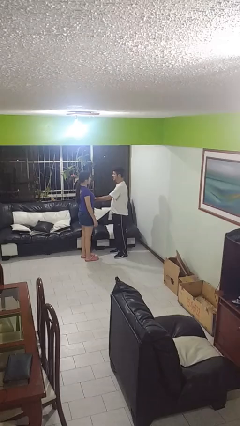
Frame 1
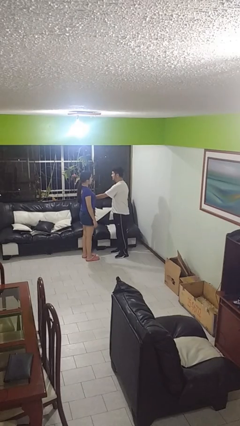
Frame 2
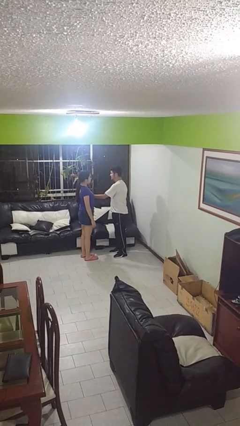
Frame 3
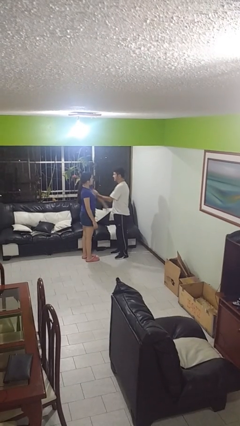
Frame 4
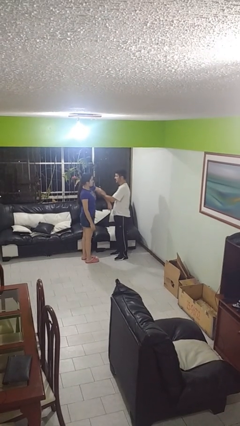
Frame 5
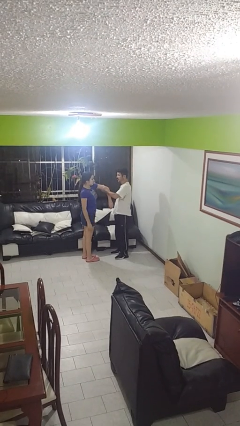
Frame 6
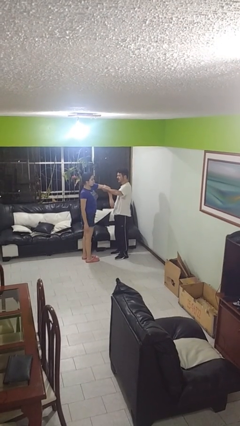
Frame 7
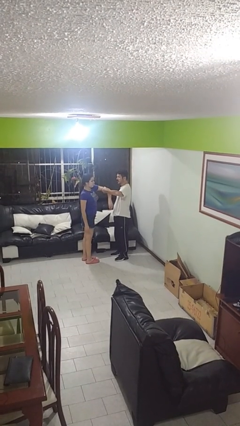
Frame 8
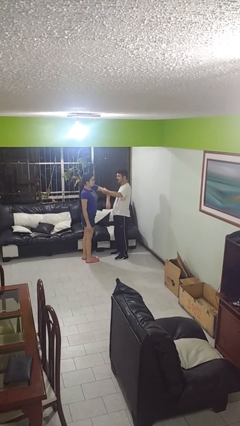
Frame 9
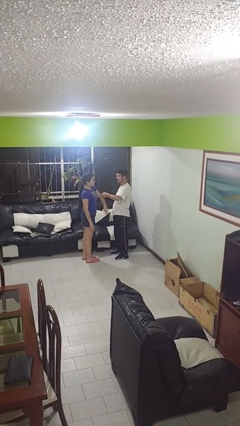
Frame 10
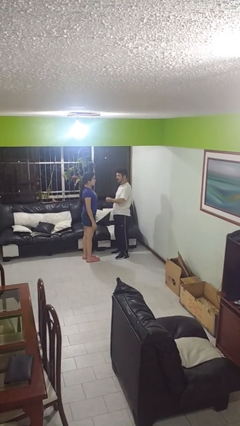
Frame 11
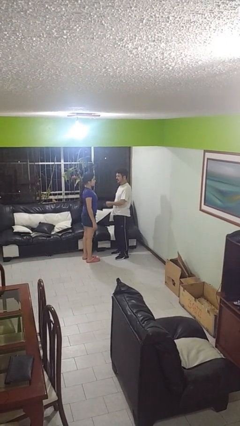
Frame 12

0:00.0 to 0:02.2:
person grabs person by bicep

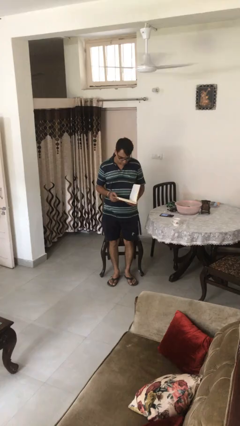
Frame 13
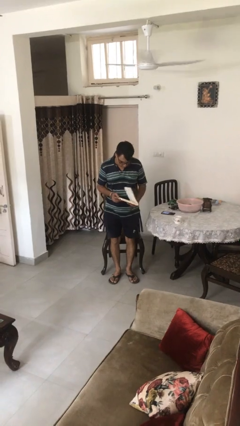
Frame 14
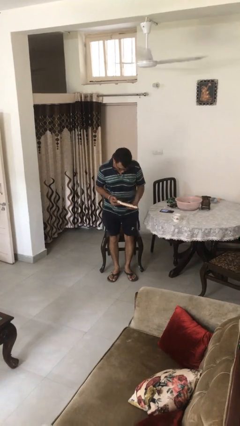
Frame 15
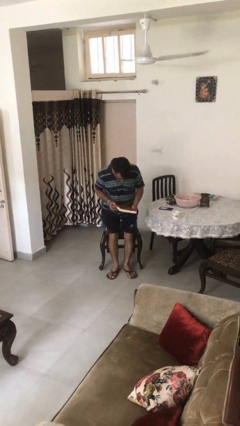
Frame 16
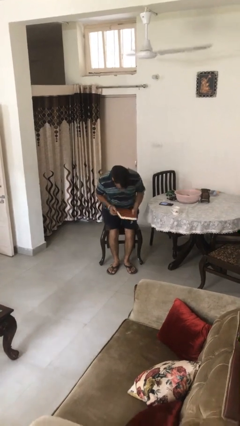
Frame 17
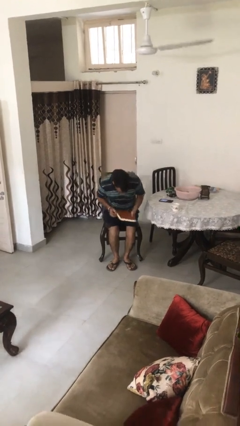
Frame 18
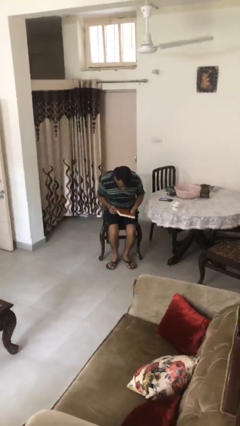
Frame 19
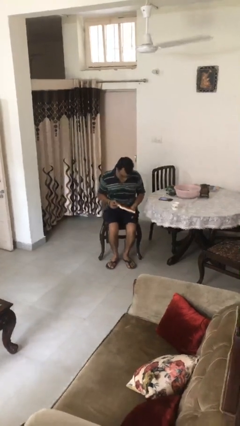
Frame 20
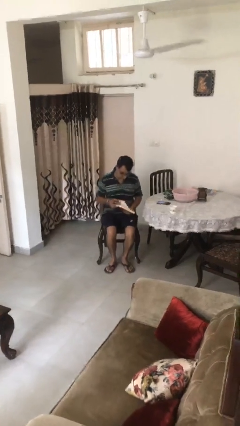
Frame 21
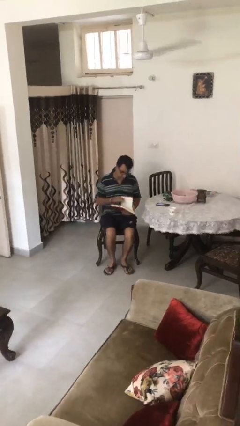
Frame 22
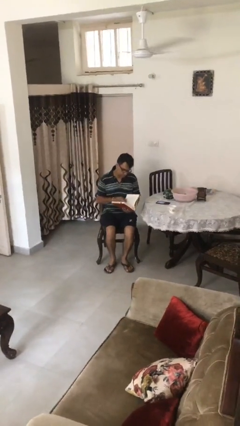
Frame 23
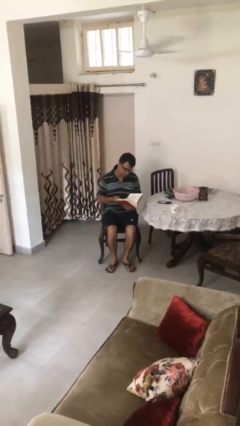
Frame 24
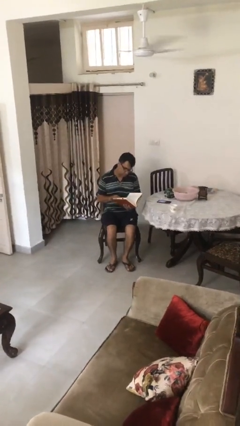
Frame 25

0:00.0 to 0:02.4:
person sits down

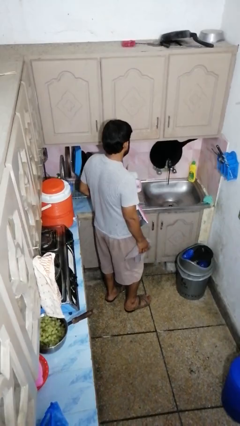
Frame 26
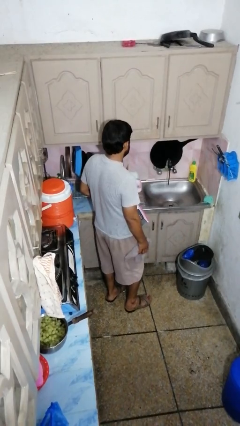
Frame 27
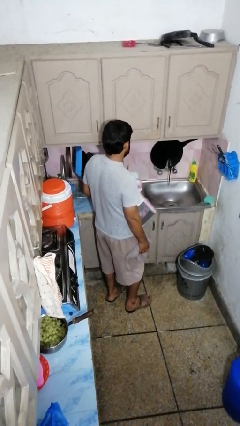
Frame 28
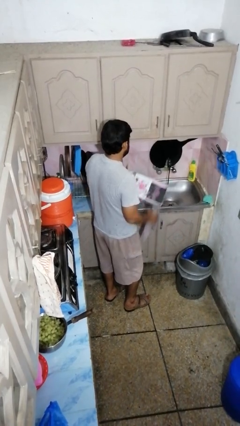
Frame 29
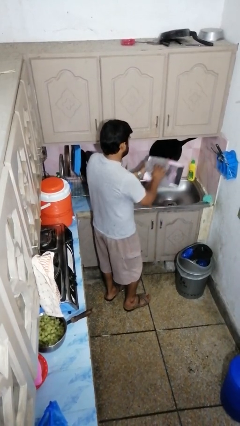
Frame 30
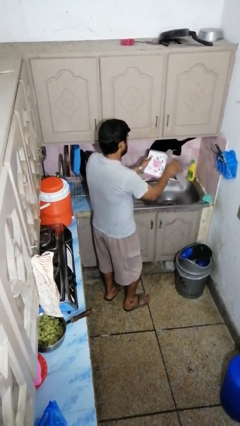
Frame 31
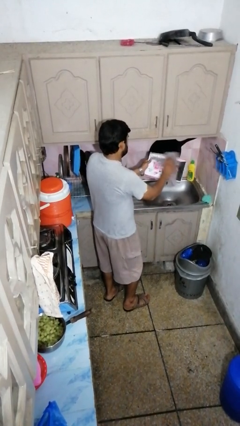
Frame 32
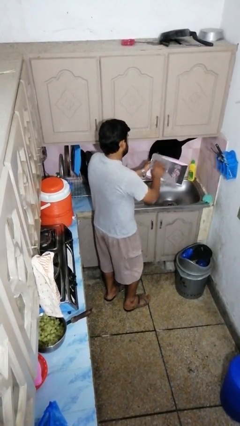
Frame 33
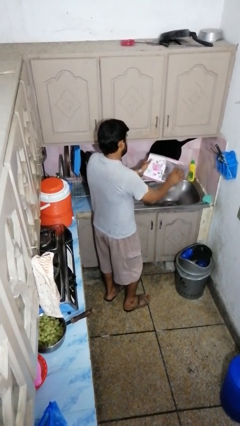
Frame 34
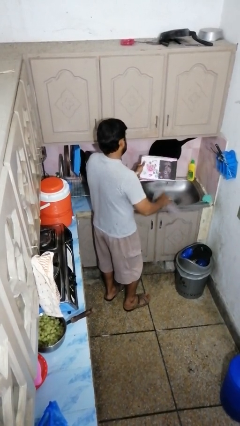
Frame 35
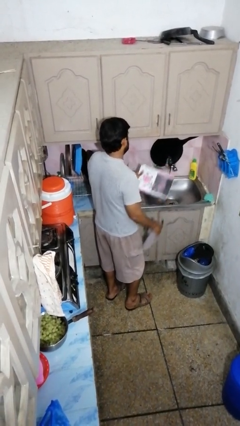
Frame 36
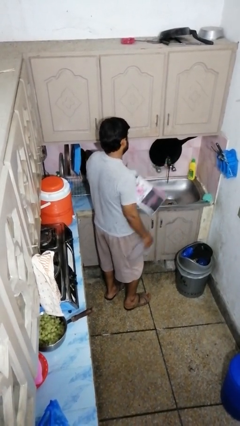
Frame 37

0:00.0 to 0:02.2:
person dries dish

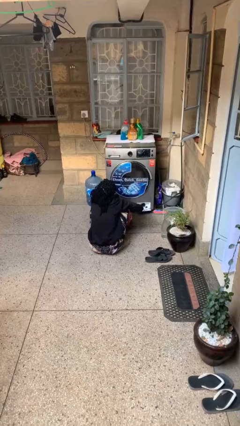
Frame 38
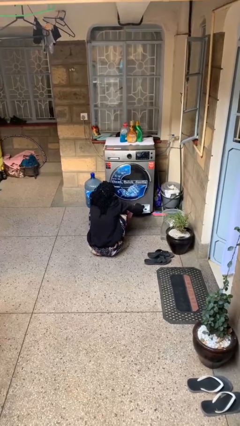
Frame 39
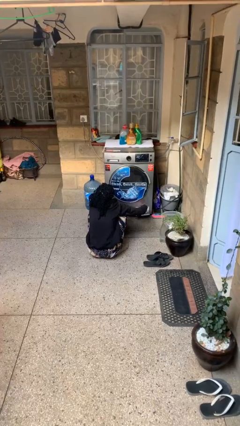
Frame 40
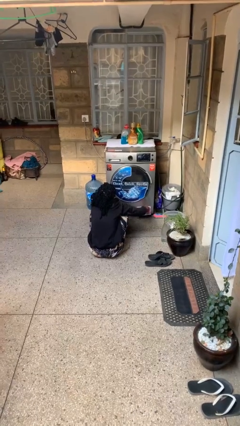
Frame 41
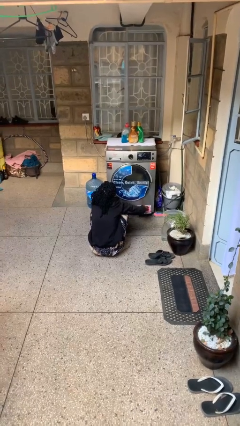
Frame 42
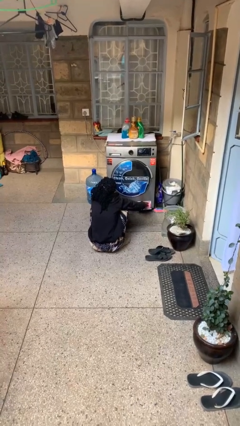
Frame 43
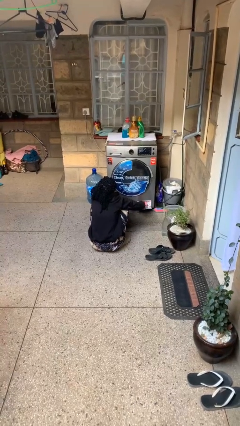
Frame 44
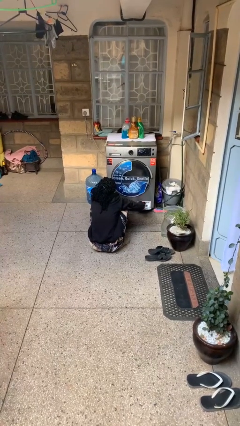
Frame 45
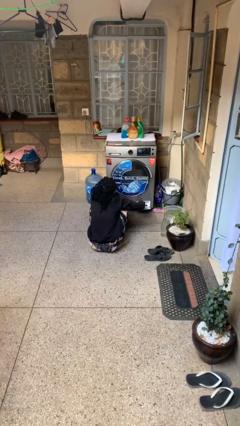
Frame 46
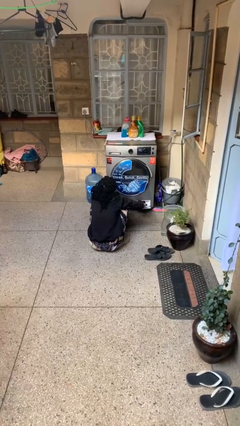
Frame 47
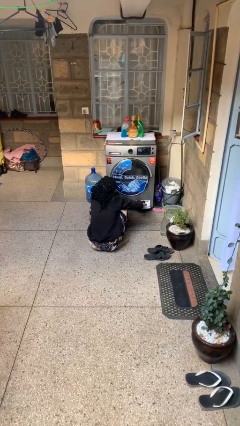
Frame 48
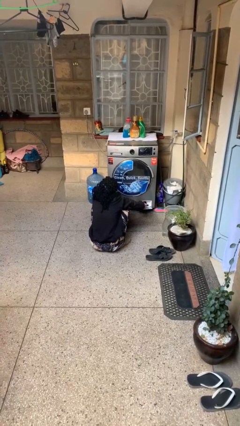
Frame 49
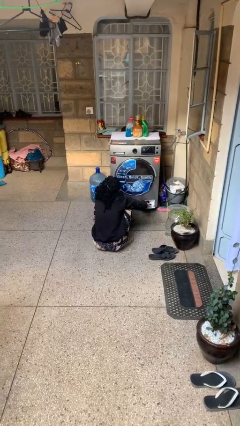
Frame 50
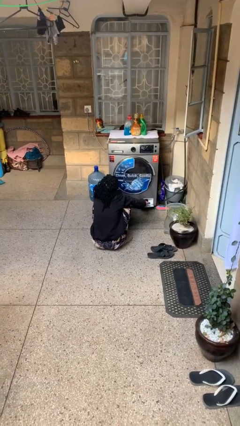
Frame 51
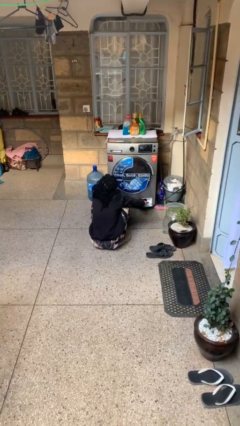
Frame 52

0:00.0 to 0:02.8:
person cleans dryer lint trap

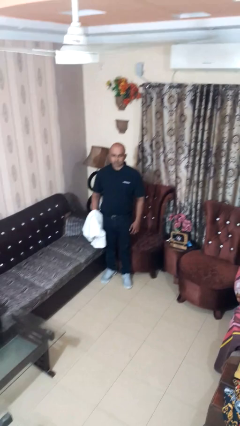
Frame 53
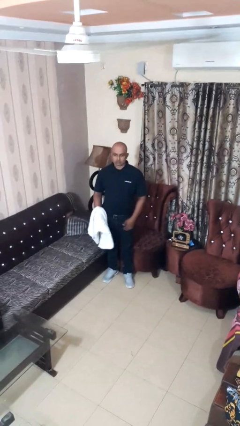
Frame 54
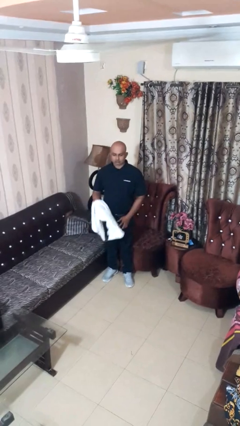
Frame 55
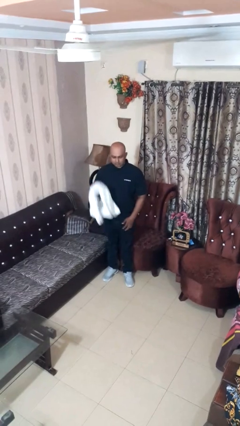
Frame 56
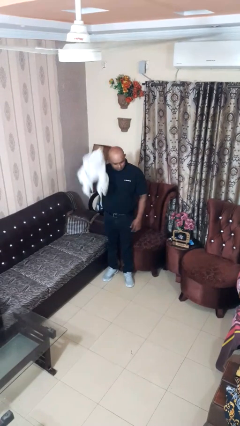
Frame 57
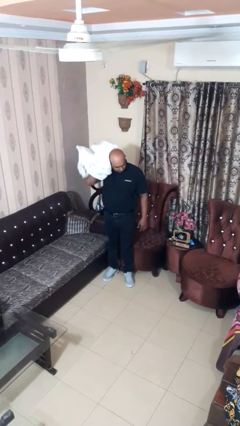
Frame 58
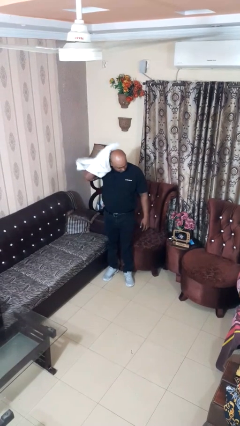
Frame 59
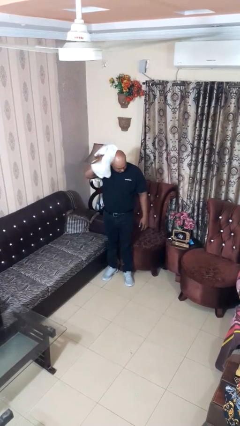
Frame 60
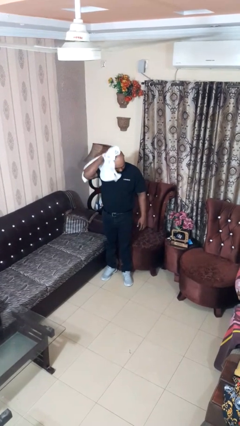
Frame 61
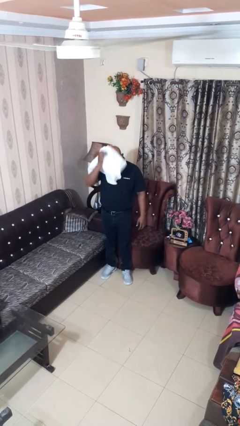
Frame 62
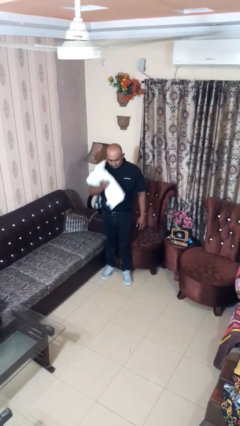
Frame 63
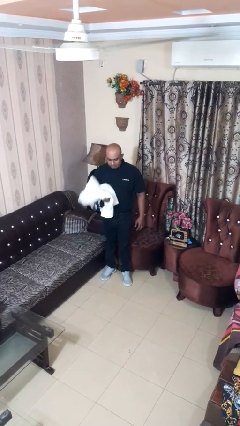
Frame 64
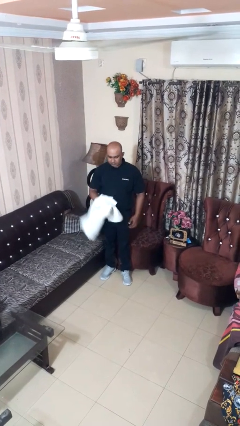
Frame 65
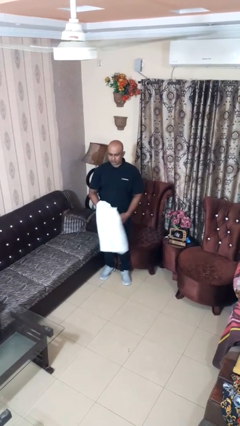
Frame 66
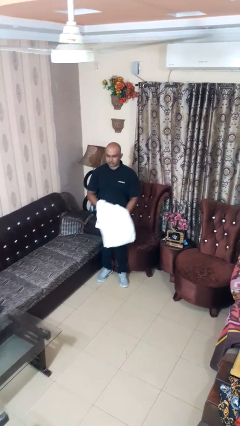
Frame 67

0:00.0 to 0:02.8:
person dries hair with towel

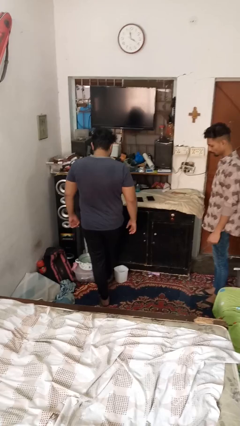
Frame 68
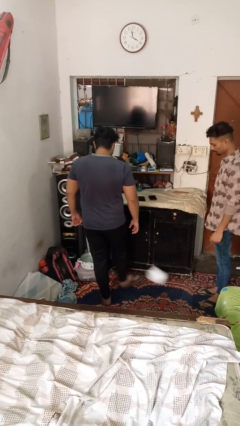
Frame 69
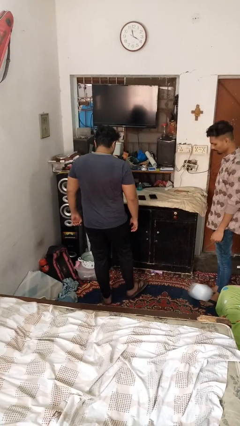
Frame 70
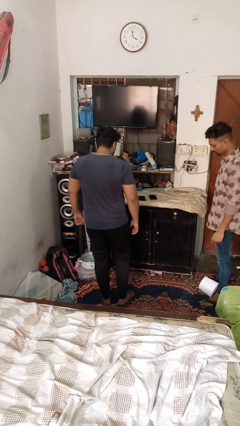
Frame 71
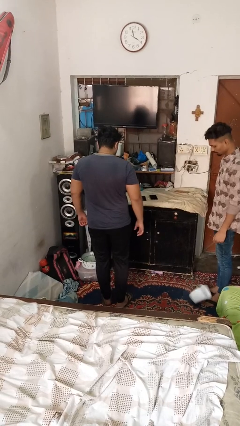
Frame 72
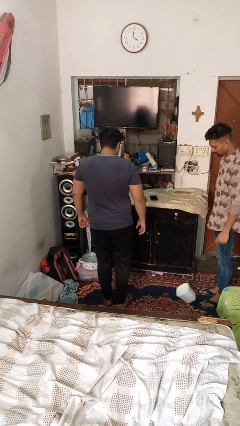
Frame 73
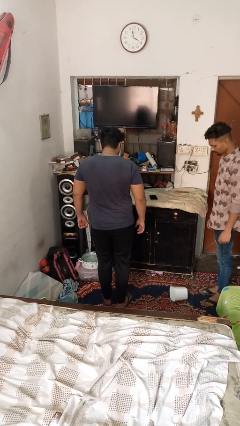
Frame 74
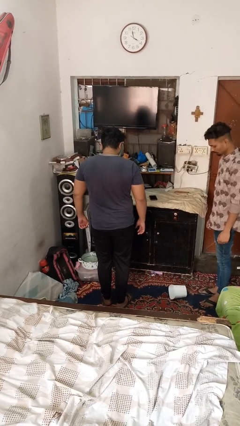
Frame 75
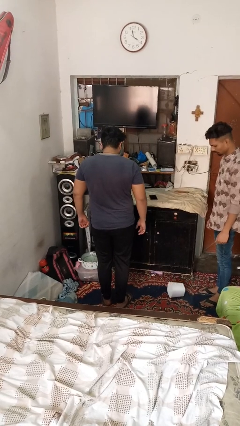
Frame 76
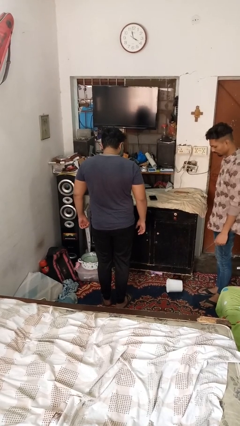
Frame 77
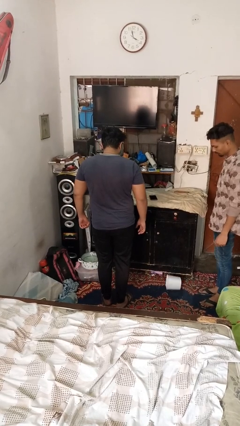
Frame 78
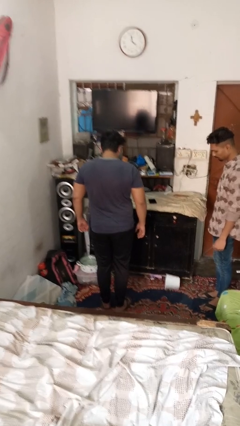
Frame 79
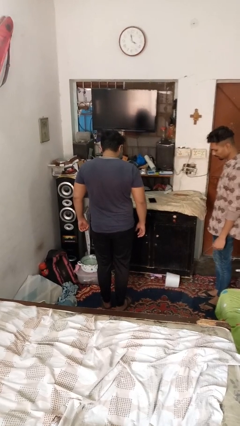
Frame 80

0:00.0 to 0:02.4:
person kicks object to person

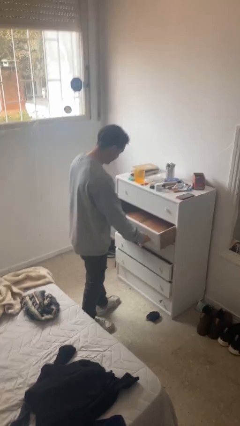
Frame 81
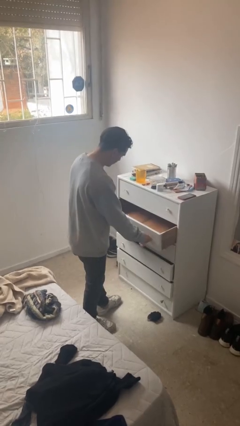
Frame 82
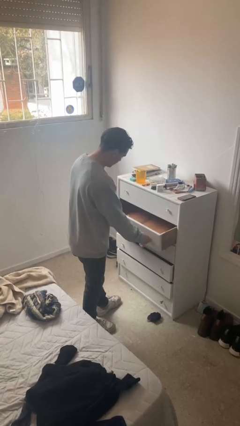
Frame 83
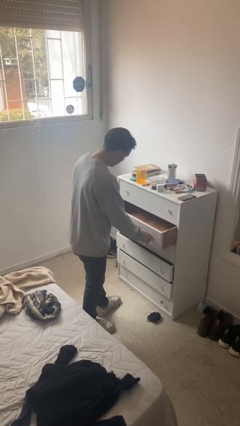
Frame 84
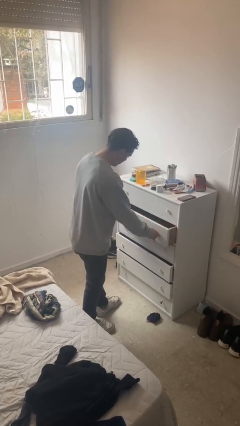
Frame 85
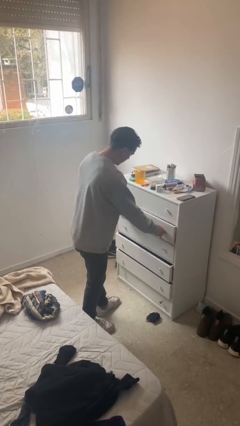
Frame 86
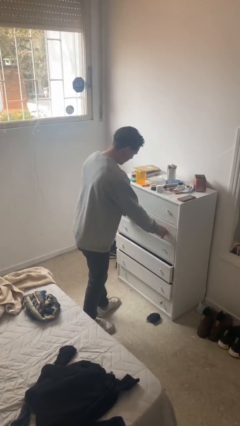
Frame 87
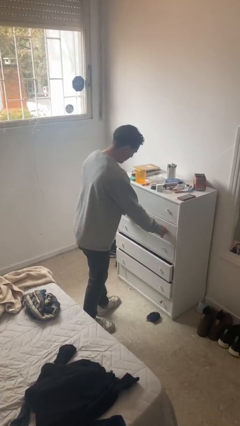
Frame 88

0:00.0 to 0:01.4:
person closes dresser drawer

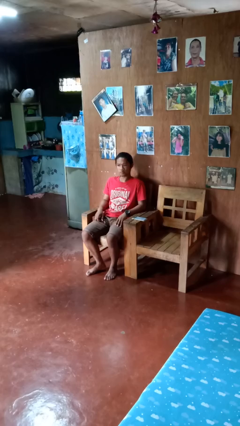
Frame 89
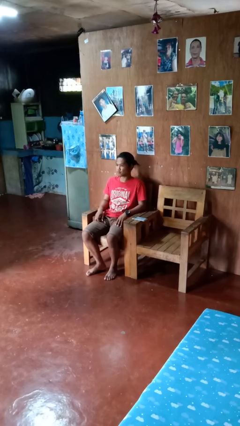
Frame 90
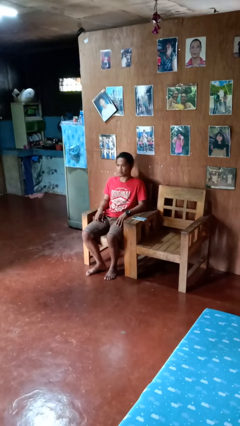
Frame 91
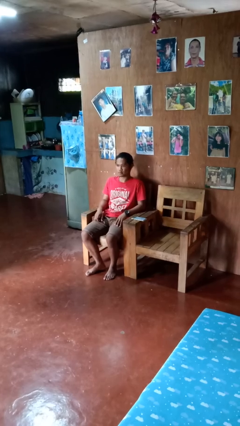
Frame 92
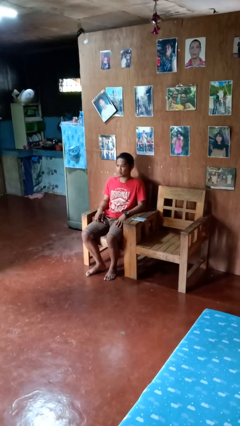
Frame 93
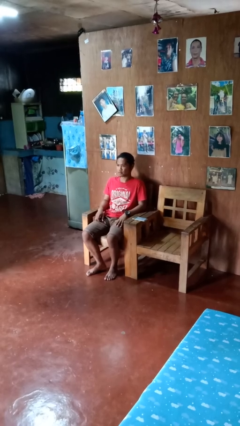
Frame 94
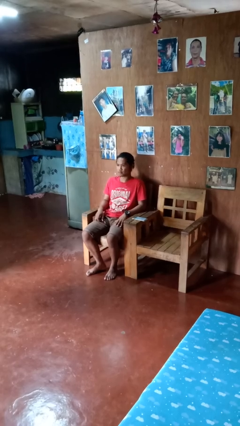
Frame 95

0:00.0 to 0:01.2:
person shakes head
